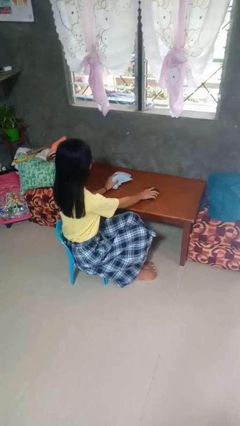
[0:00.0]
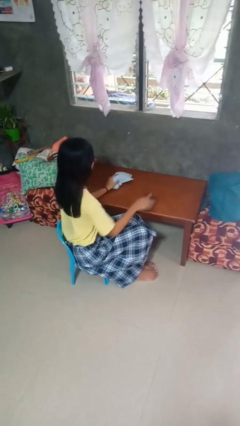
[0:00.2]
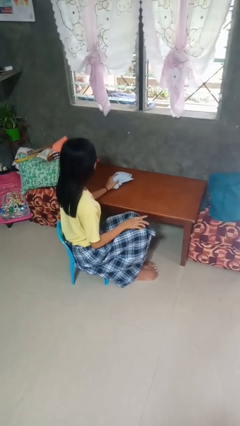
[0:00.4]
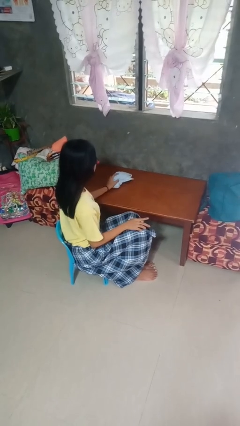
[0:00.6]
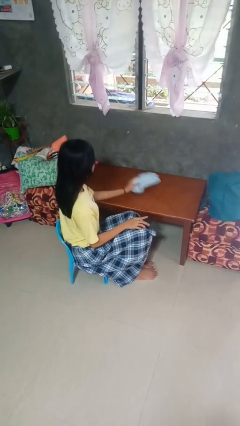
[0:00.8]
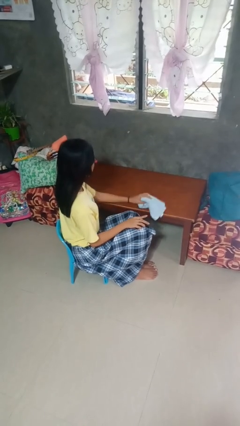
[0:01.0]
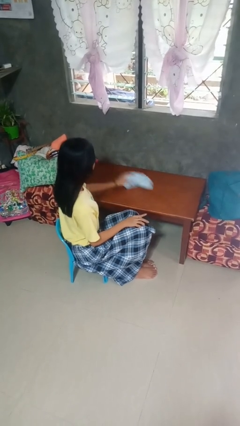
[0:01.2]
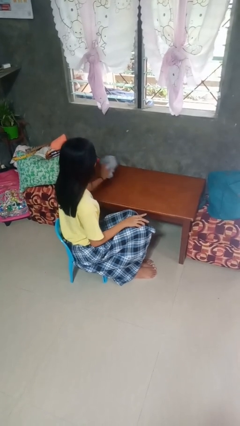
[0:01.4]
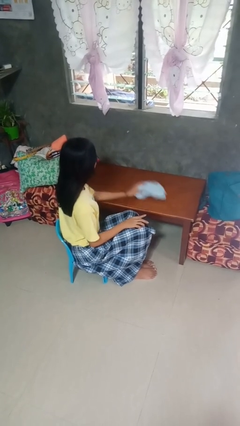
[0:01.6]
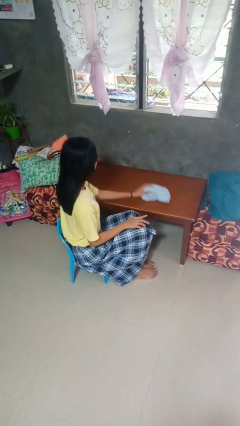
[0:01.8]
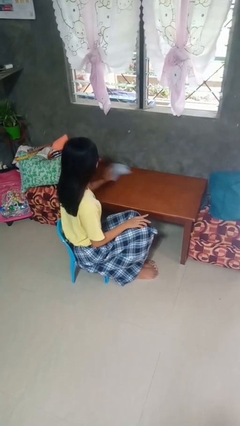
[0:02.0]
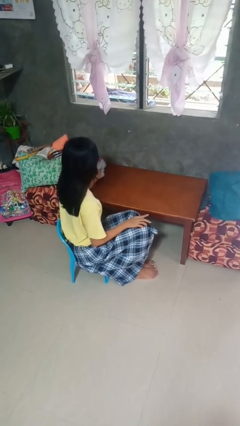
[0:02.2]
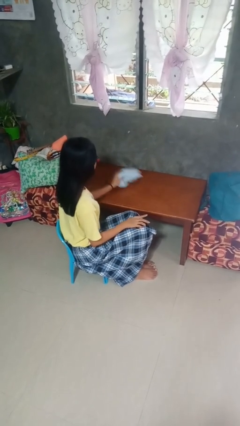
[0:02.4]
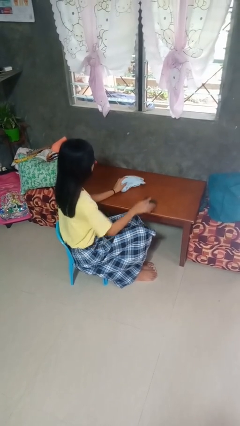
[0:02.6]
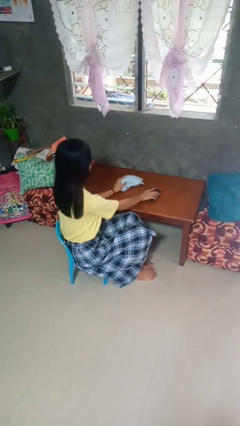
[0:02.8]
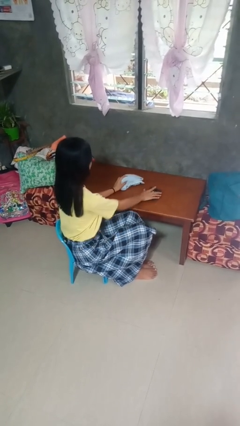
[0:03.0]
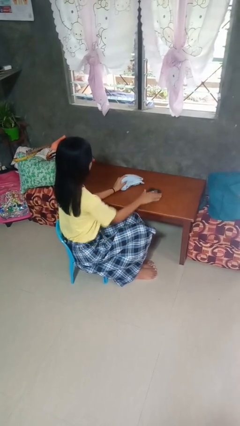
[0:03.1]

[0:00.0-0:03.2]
person cleans table with rag

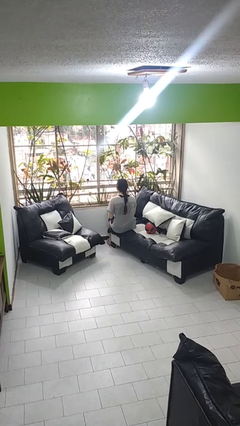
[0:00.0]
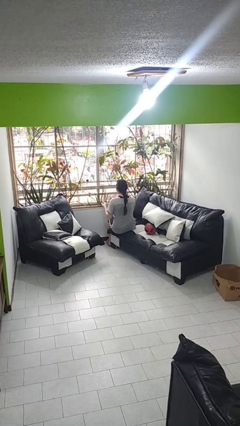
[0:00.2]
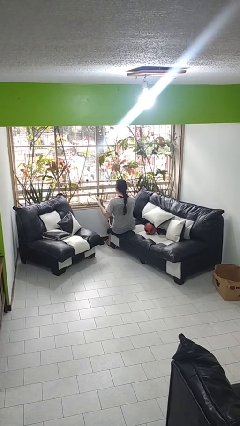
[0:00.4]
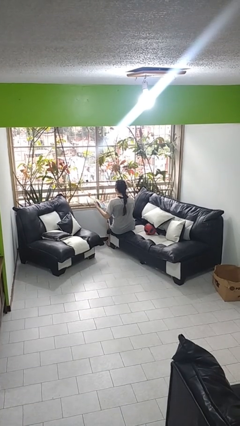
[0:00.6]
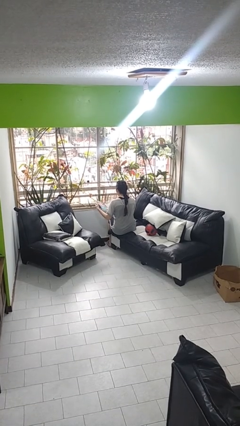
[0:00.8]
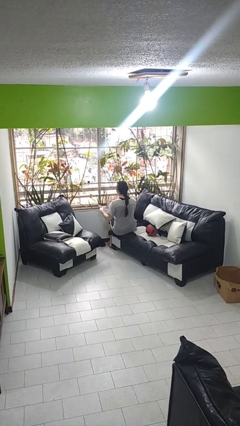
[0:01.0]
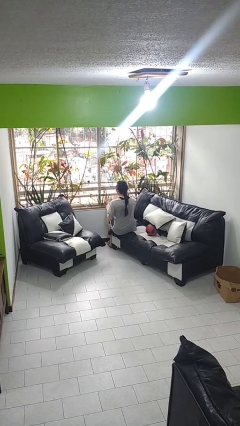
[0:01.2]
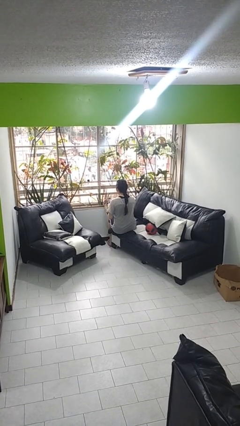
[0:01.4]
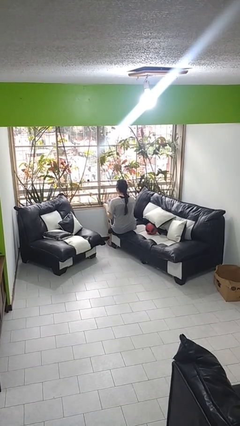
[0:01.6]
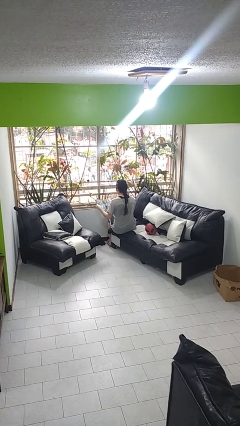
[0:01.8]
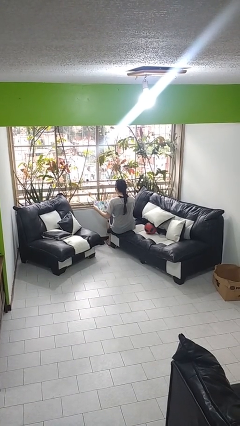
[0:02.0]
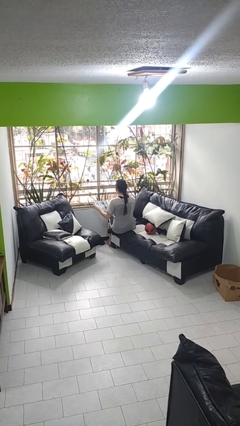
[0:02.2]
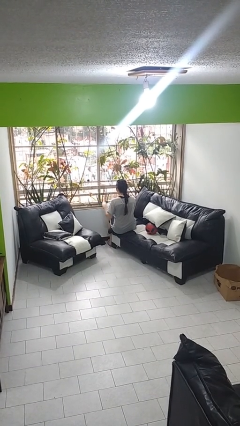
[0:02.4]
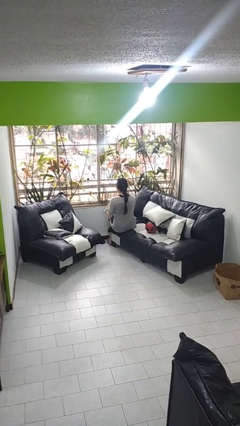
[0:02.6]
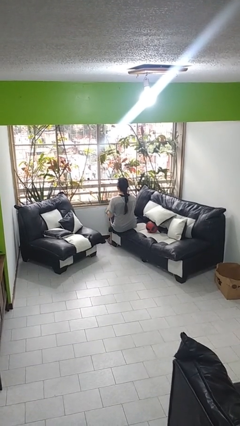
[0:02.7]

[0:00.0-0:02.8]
person reads magazine

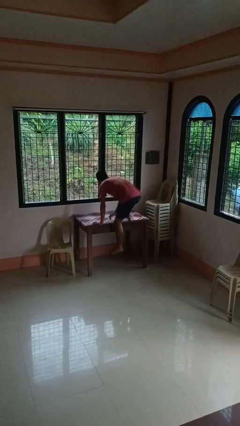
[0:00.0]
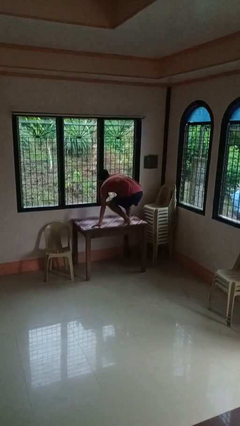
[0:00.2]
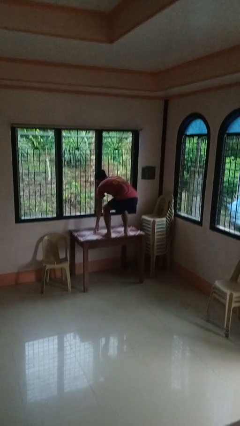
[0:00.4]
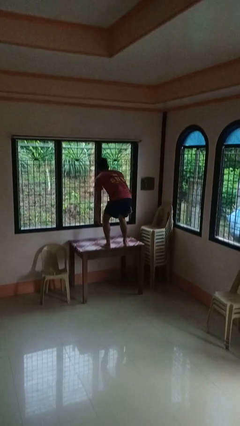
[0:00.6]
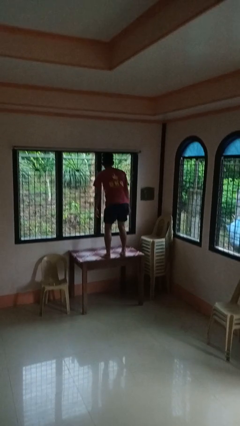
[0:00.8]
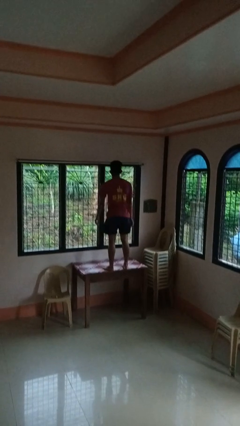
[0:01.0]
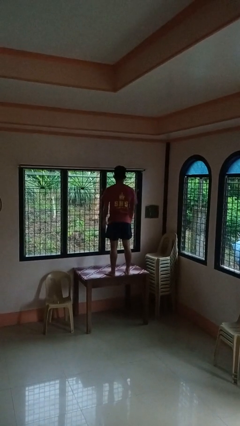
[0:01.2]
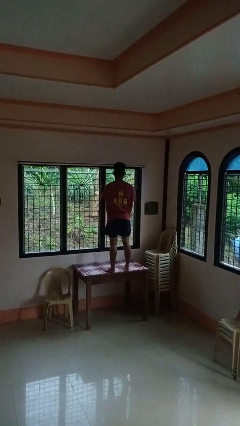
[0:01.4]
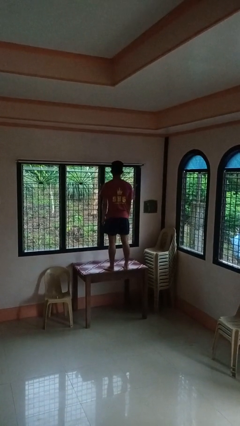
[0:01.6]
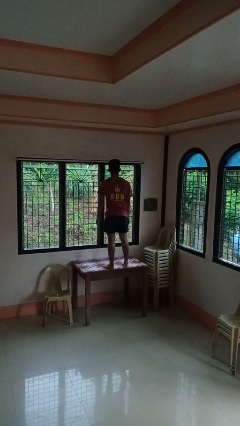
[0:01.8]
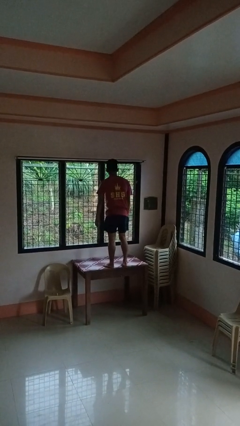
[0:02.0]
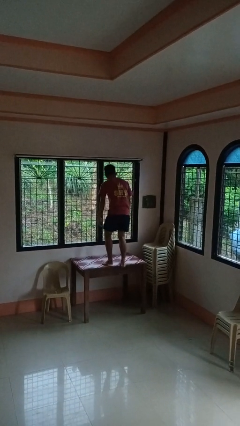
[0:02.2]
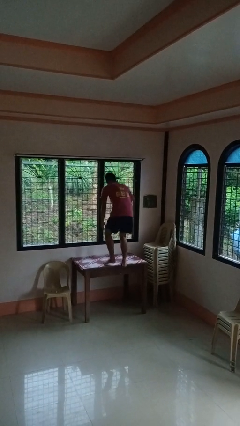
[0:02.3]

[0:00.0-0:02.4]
person climbs on table

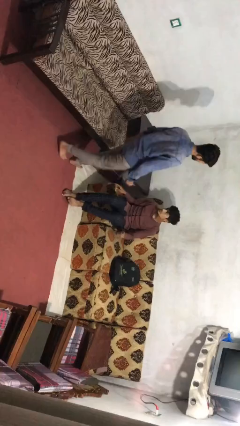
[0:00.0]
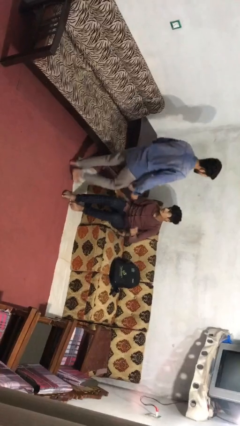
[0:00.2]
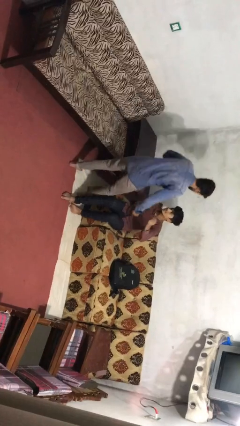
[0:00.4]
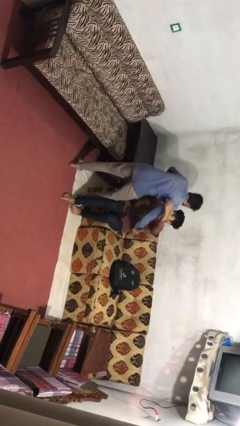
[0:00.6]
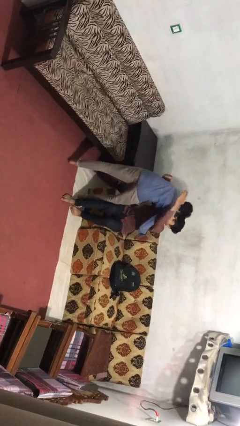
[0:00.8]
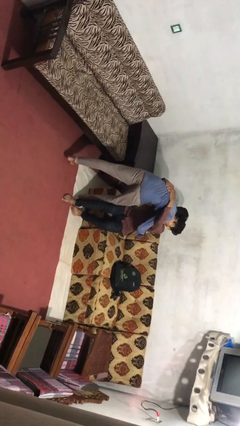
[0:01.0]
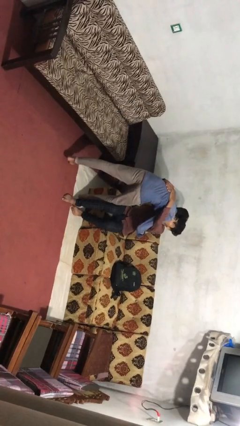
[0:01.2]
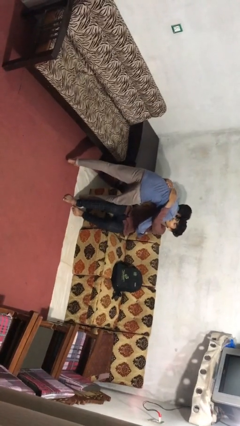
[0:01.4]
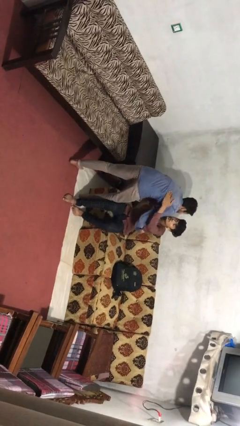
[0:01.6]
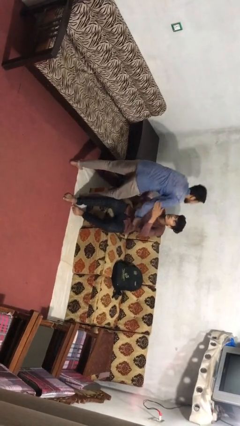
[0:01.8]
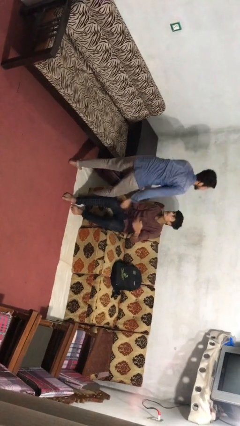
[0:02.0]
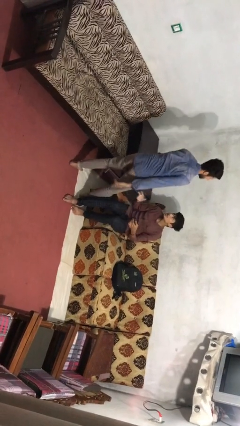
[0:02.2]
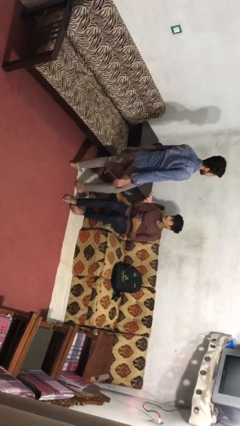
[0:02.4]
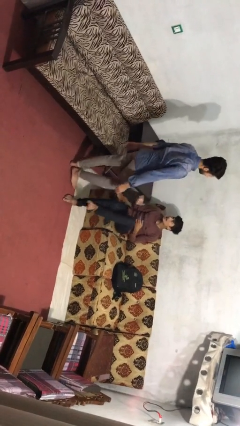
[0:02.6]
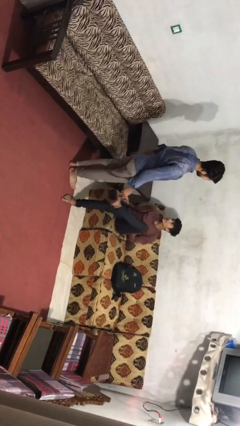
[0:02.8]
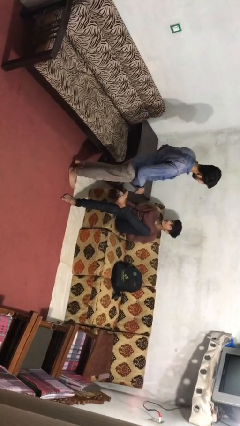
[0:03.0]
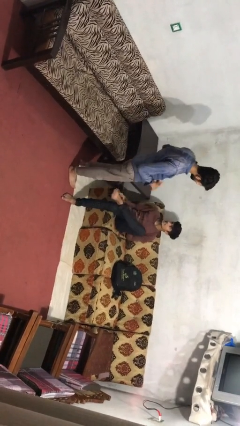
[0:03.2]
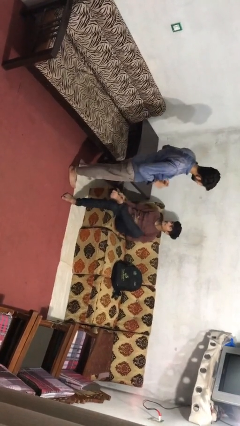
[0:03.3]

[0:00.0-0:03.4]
person embraces person

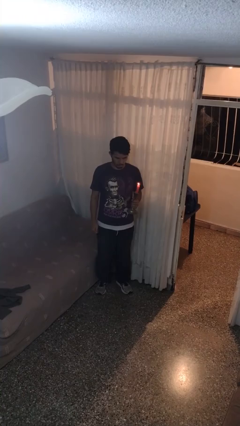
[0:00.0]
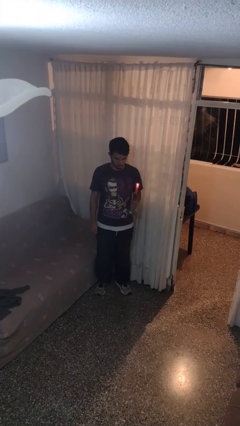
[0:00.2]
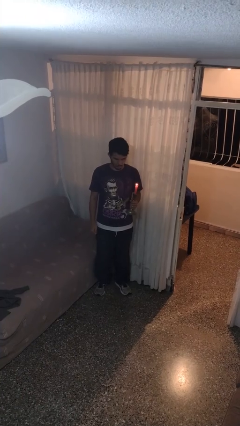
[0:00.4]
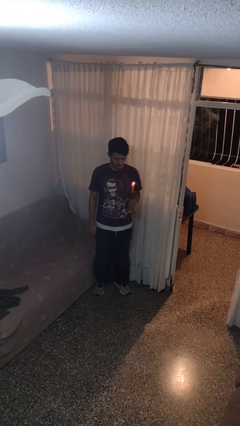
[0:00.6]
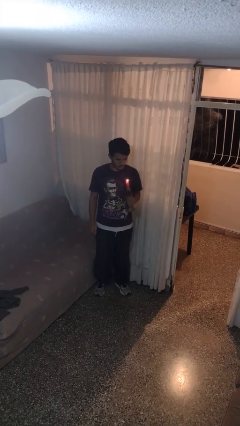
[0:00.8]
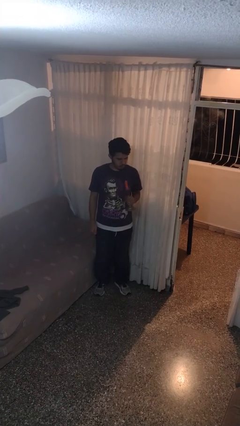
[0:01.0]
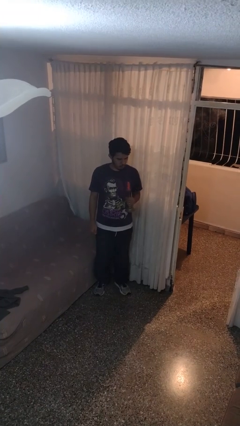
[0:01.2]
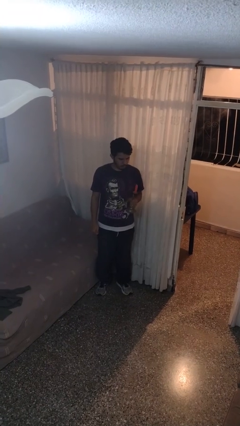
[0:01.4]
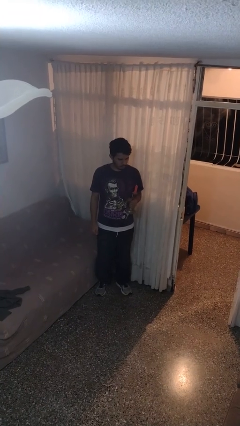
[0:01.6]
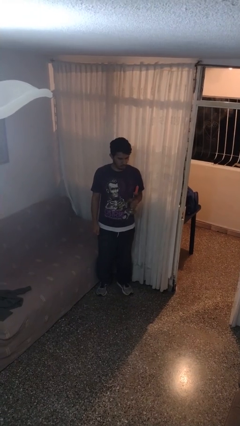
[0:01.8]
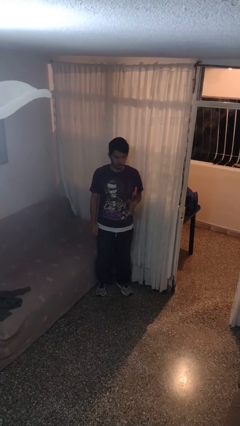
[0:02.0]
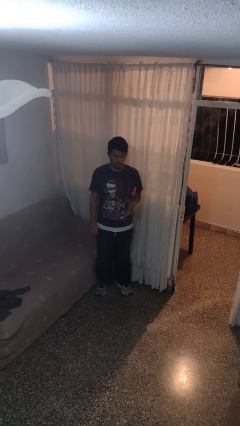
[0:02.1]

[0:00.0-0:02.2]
person extinguishes candle

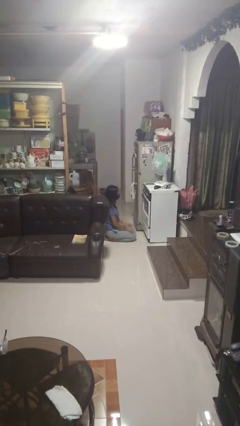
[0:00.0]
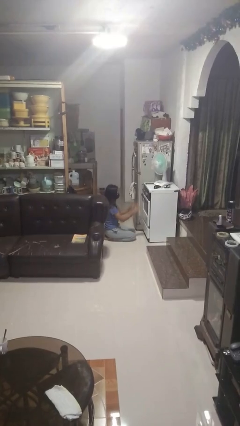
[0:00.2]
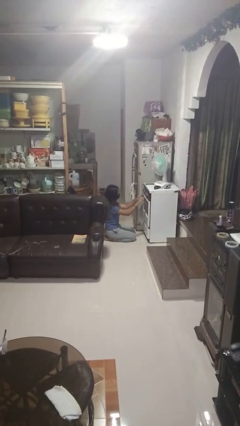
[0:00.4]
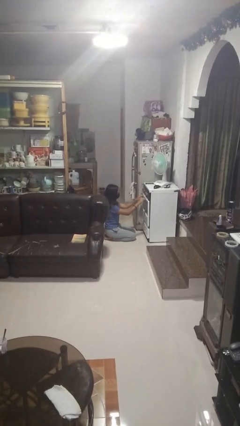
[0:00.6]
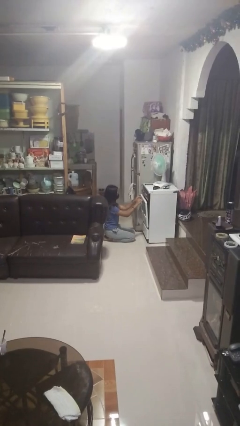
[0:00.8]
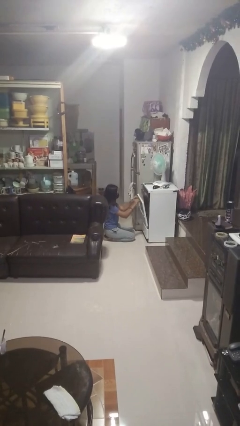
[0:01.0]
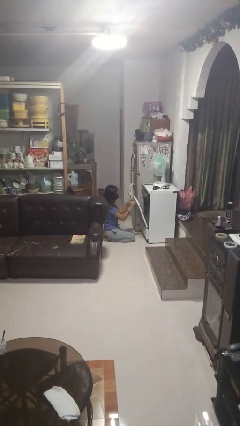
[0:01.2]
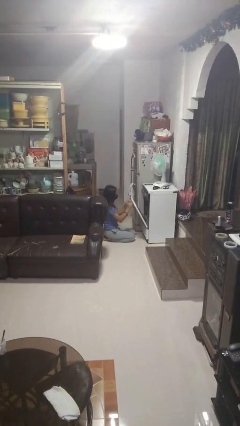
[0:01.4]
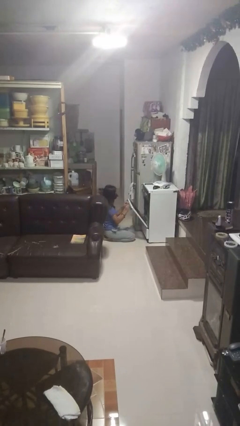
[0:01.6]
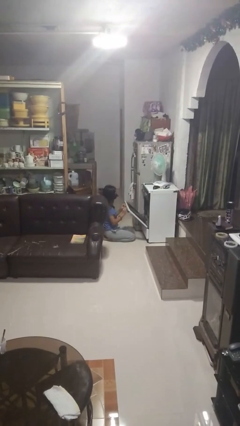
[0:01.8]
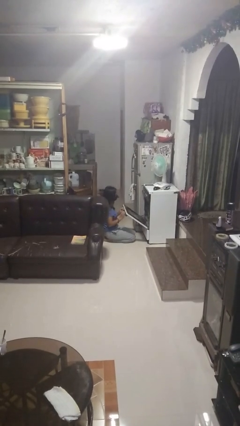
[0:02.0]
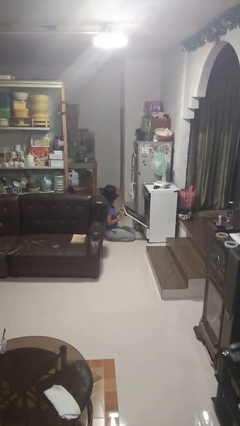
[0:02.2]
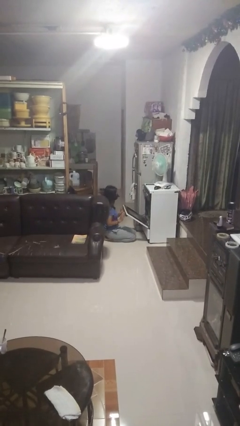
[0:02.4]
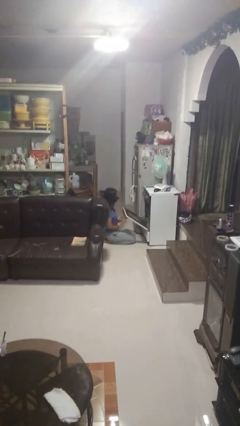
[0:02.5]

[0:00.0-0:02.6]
person opens oven door

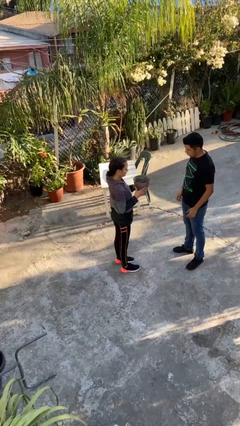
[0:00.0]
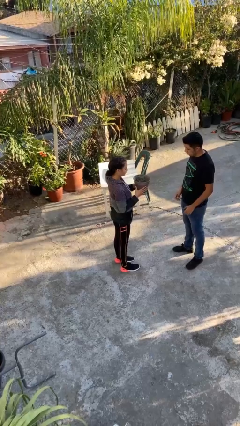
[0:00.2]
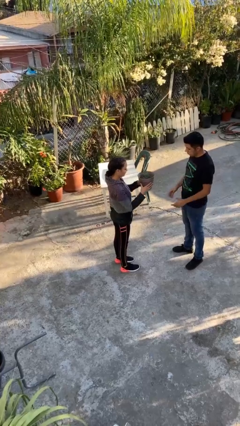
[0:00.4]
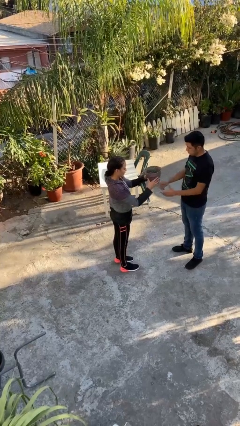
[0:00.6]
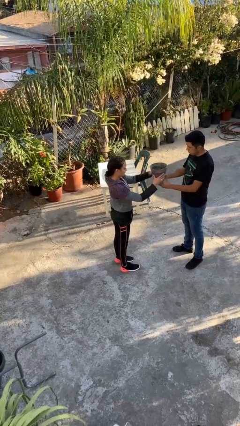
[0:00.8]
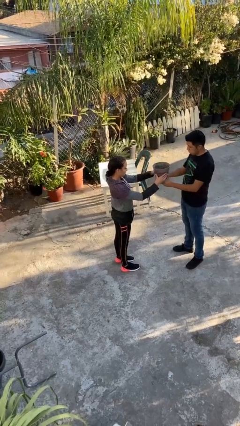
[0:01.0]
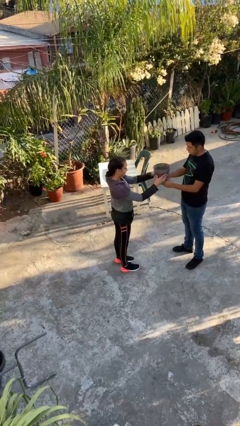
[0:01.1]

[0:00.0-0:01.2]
person transfers object to person
